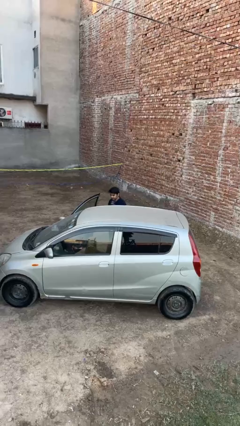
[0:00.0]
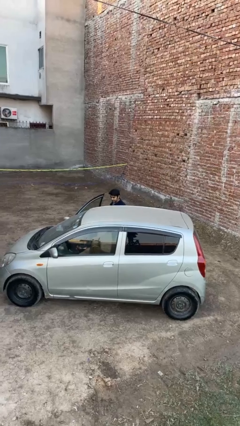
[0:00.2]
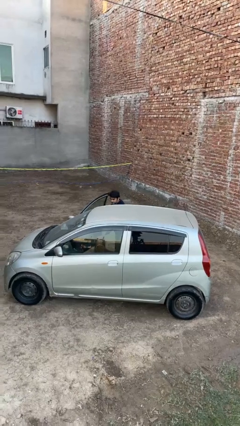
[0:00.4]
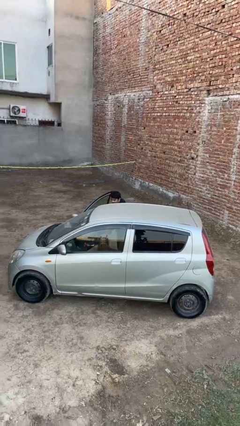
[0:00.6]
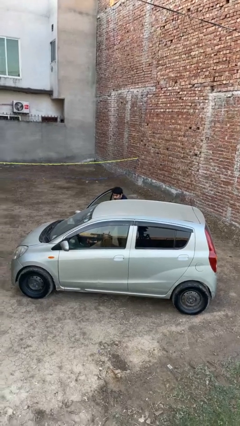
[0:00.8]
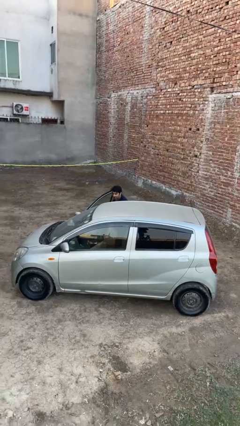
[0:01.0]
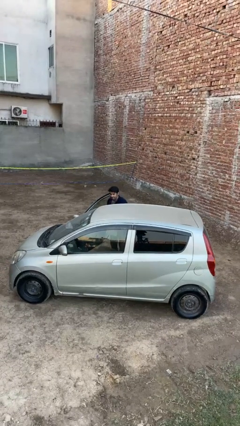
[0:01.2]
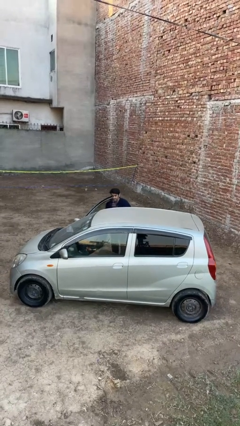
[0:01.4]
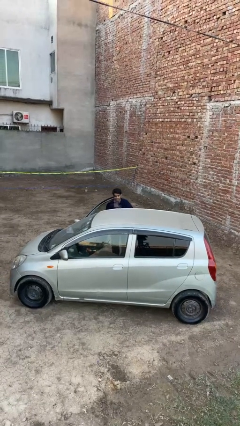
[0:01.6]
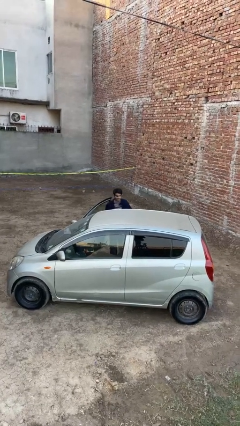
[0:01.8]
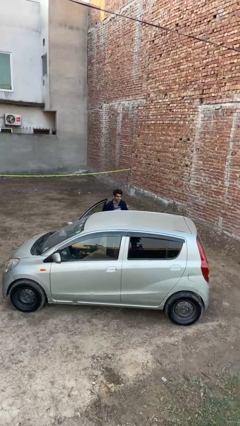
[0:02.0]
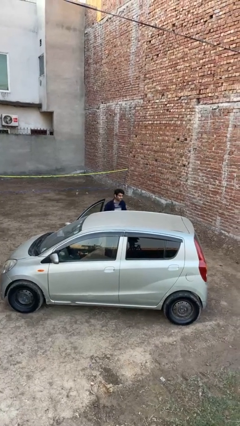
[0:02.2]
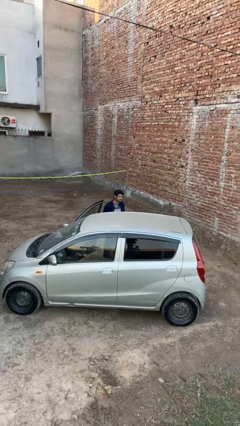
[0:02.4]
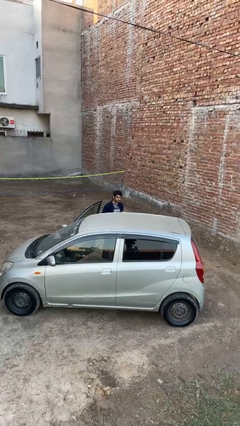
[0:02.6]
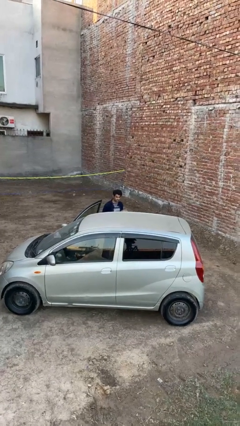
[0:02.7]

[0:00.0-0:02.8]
person unloads car

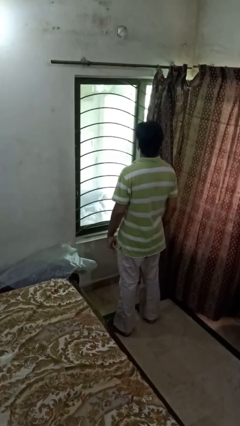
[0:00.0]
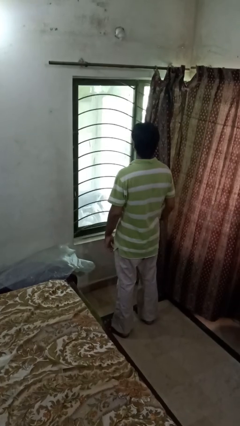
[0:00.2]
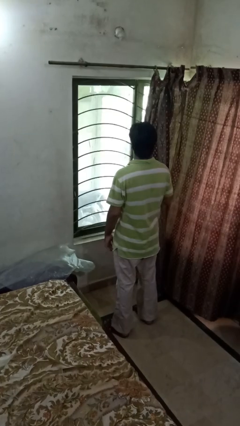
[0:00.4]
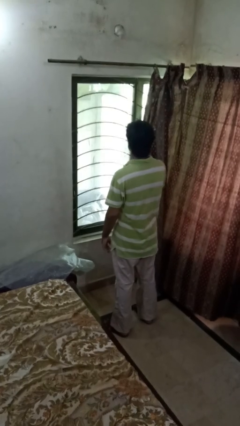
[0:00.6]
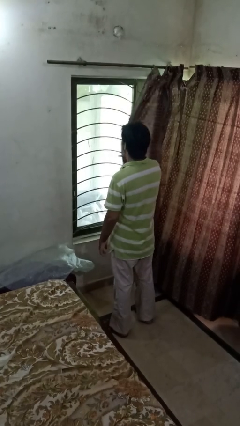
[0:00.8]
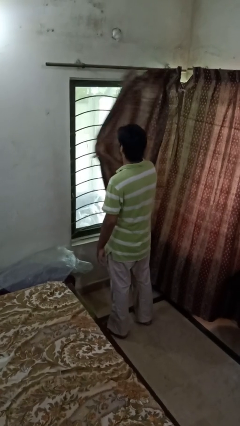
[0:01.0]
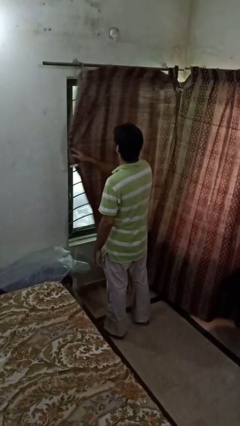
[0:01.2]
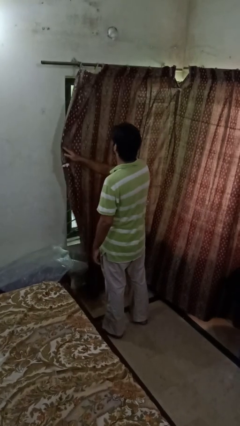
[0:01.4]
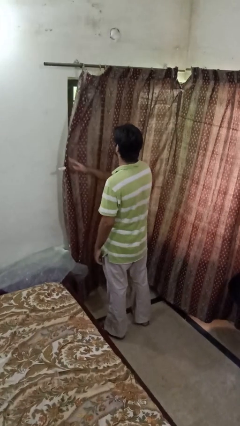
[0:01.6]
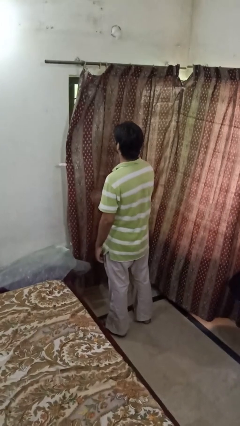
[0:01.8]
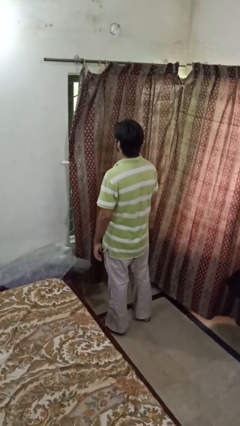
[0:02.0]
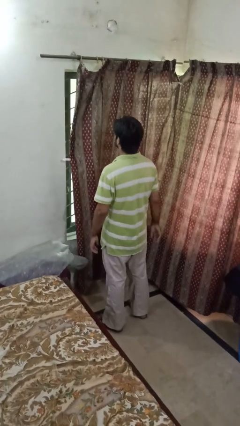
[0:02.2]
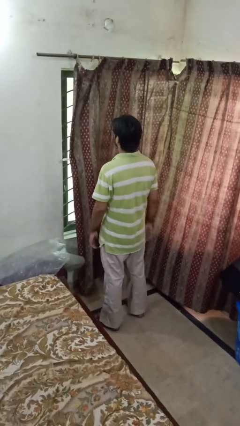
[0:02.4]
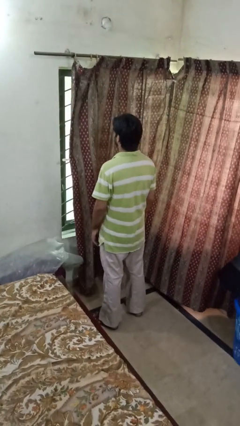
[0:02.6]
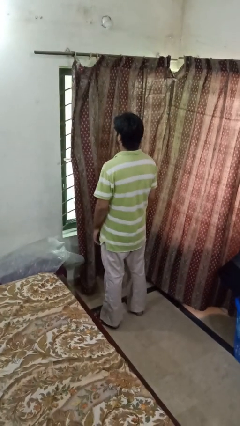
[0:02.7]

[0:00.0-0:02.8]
person closes curtains

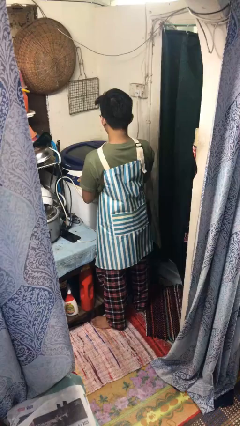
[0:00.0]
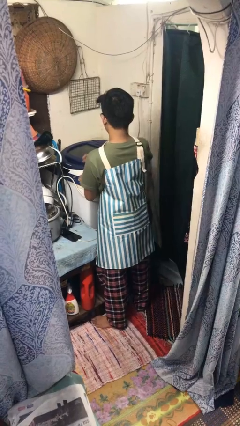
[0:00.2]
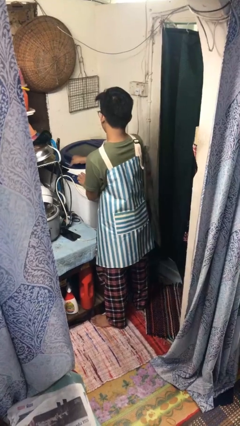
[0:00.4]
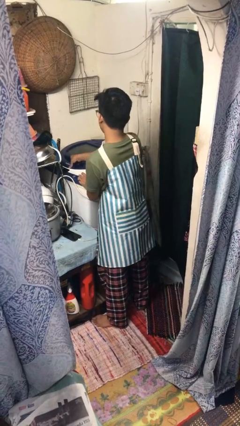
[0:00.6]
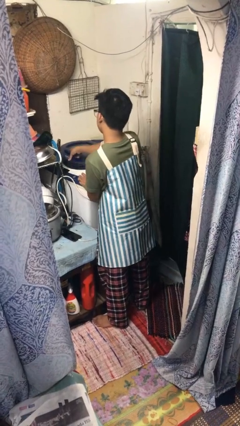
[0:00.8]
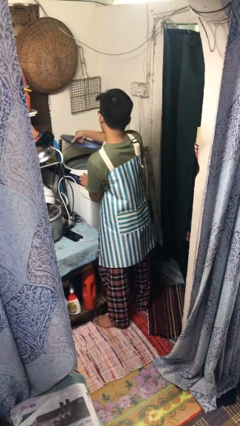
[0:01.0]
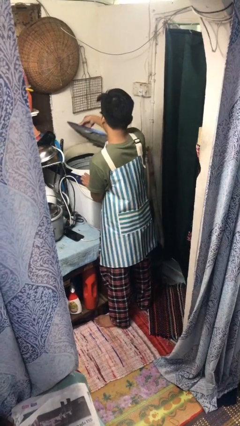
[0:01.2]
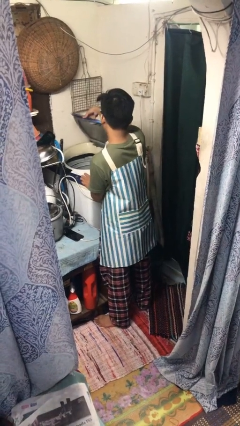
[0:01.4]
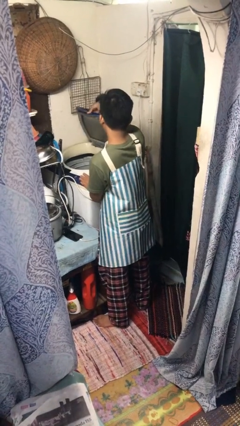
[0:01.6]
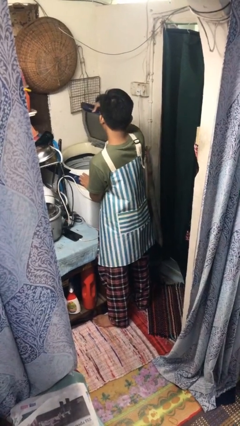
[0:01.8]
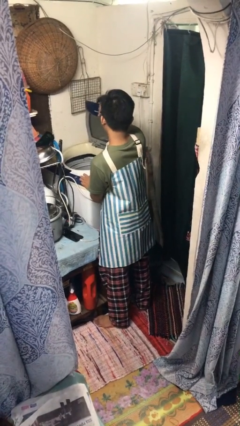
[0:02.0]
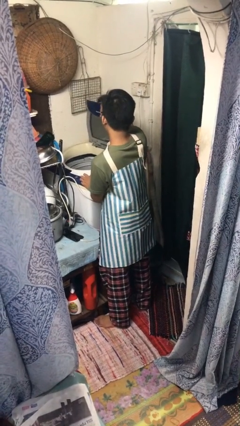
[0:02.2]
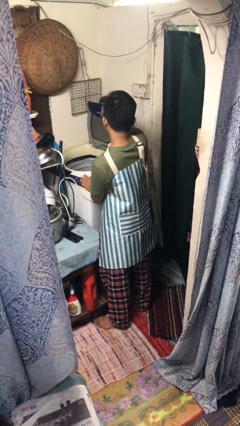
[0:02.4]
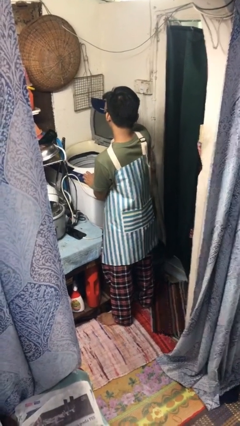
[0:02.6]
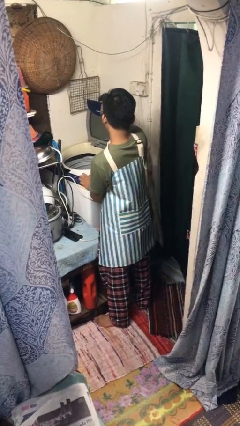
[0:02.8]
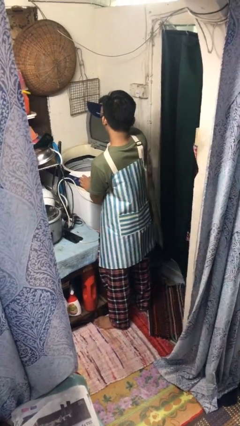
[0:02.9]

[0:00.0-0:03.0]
person opens clothes washer

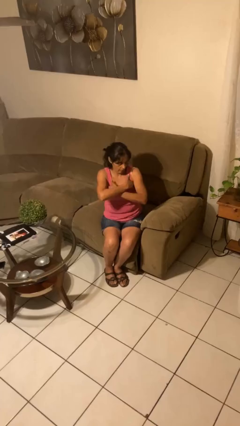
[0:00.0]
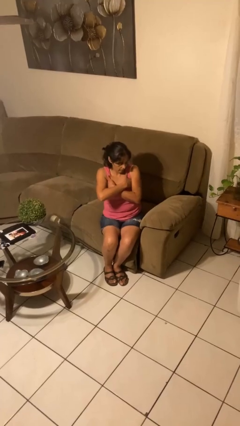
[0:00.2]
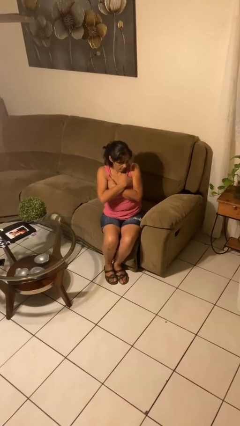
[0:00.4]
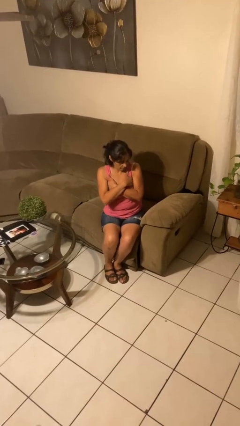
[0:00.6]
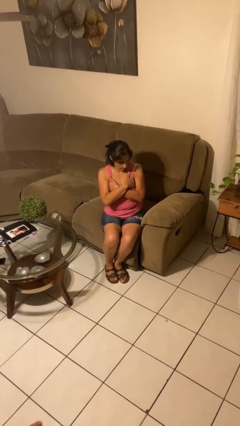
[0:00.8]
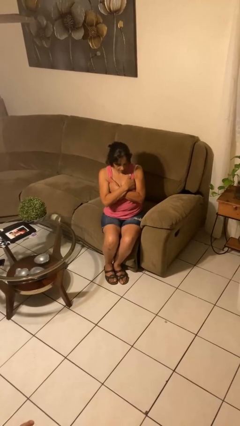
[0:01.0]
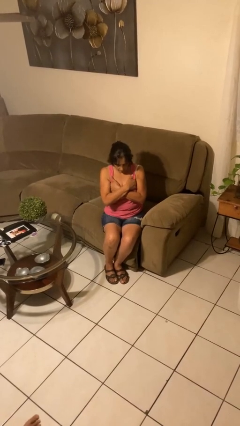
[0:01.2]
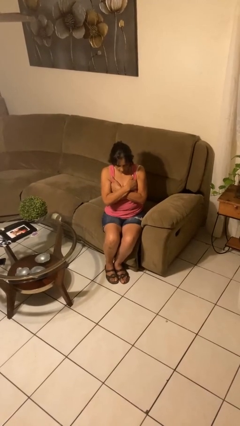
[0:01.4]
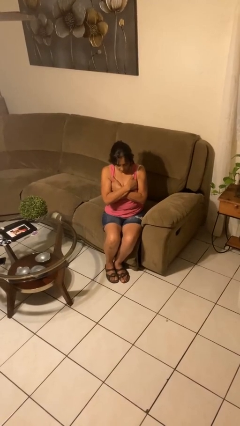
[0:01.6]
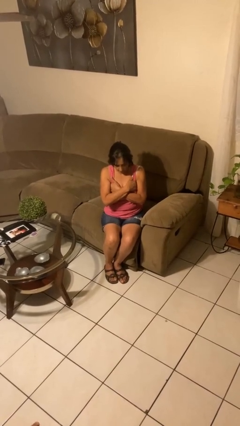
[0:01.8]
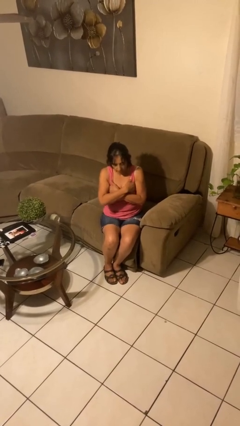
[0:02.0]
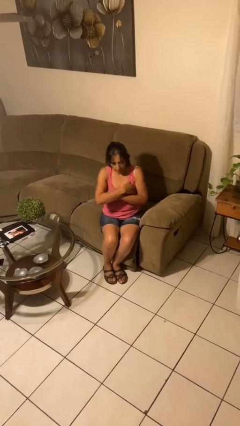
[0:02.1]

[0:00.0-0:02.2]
person gestures arms x

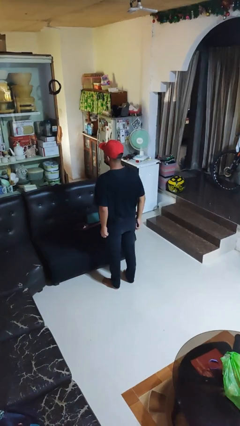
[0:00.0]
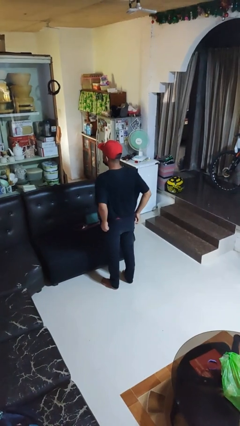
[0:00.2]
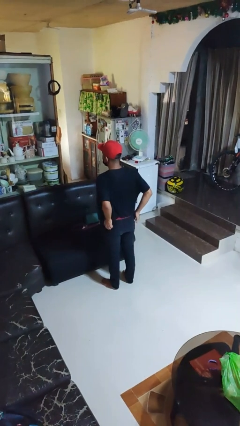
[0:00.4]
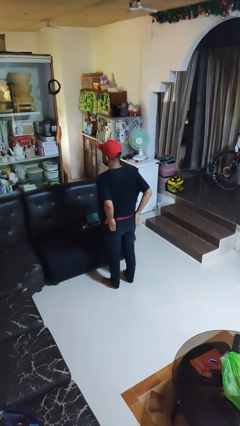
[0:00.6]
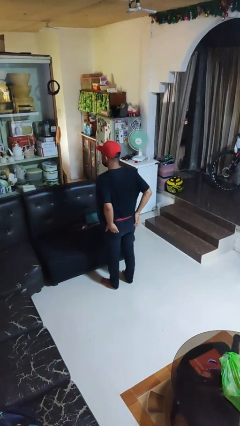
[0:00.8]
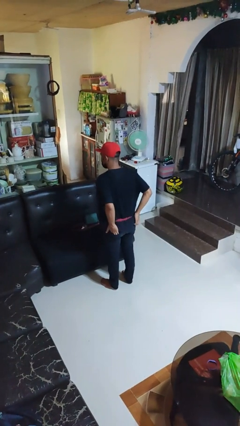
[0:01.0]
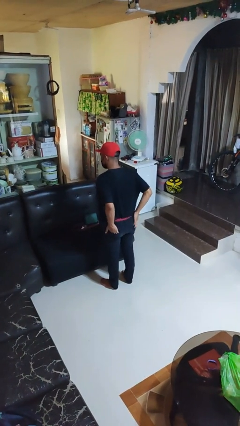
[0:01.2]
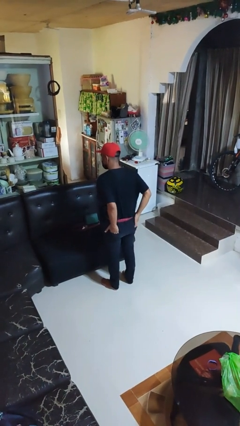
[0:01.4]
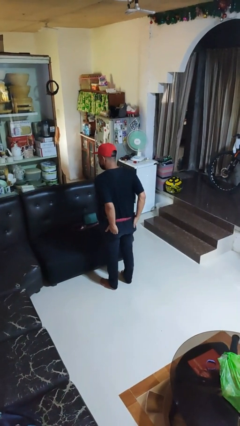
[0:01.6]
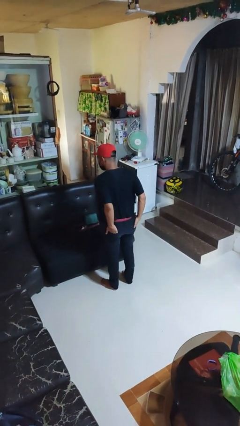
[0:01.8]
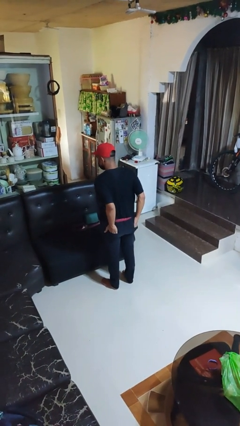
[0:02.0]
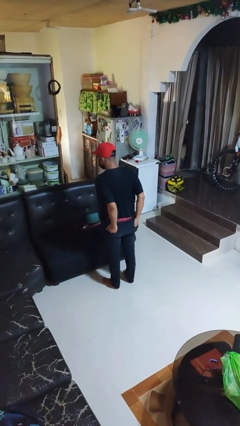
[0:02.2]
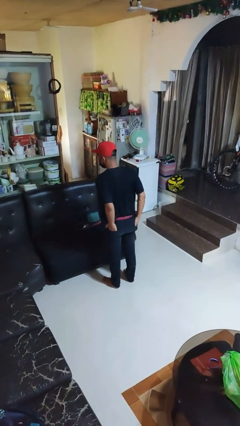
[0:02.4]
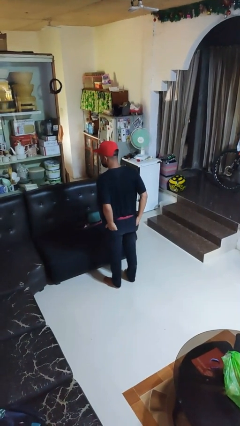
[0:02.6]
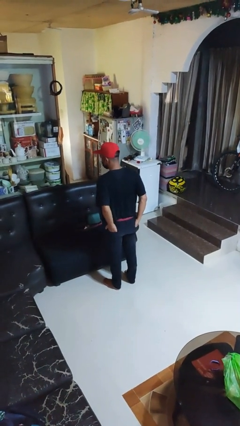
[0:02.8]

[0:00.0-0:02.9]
person puts hands in back pockets

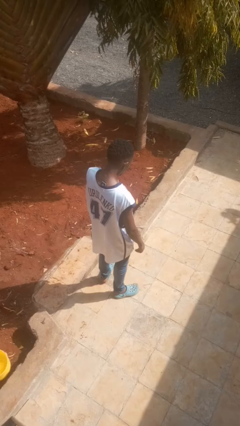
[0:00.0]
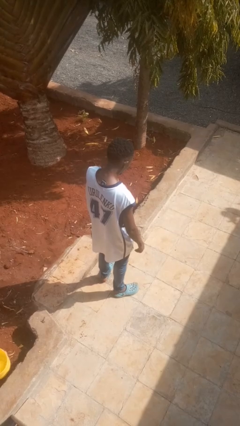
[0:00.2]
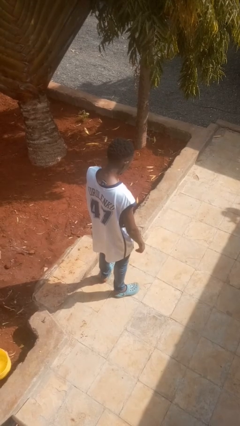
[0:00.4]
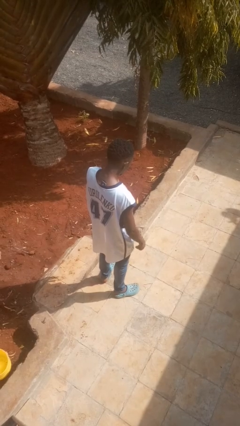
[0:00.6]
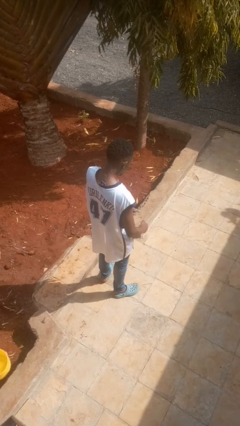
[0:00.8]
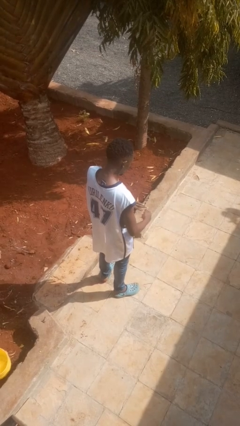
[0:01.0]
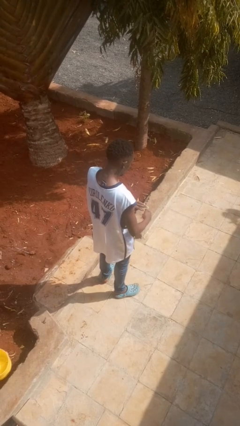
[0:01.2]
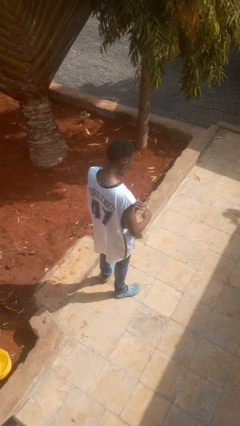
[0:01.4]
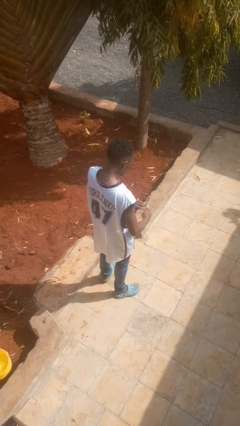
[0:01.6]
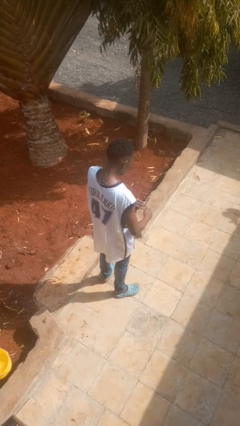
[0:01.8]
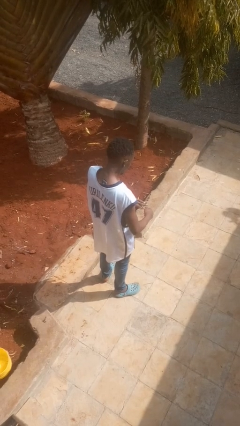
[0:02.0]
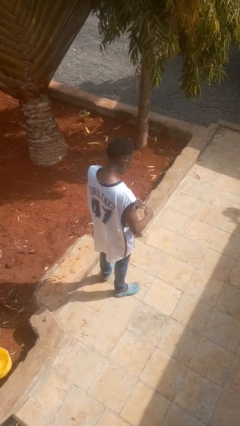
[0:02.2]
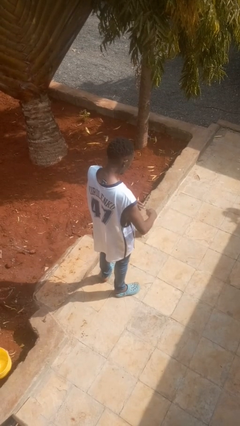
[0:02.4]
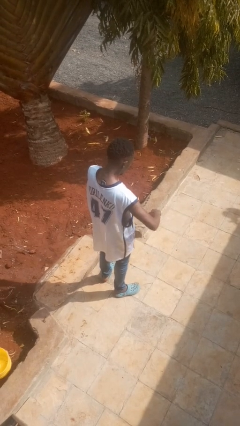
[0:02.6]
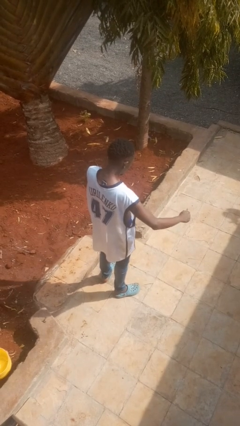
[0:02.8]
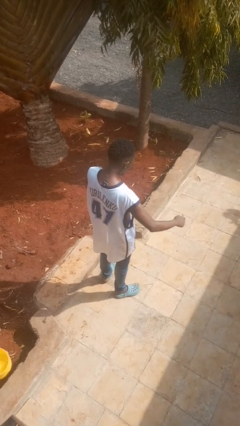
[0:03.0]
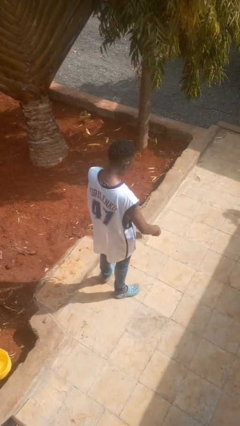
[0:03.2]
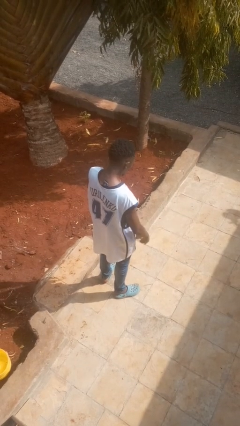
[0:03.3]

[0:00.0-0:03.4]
person clips fingernails

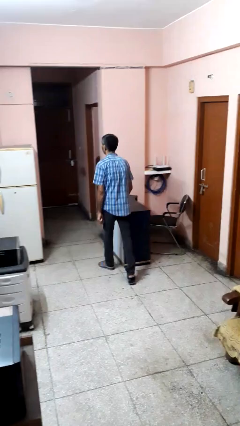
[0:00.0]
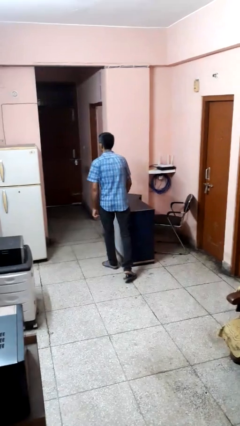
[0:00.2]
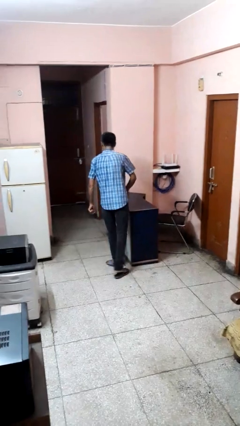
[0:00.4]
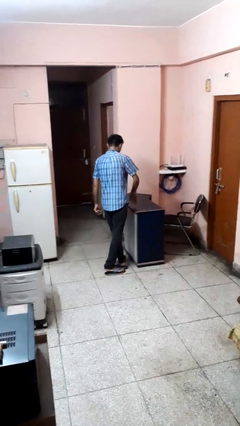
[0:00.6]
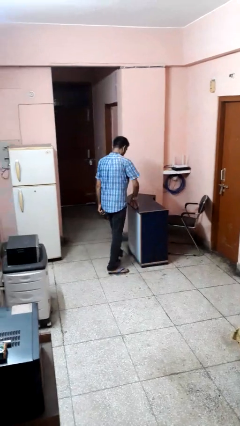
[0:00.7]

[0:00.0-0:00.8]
person bumps into table
